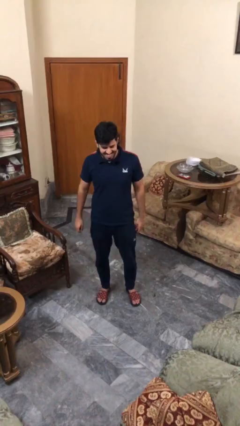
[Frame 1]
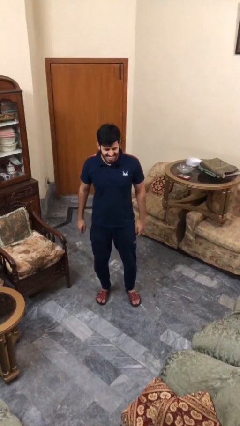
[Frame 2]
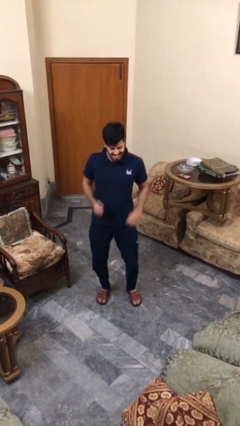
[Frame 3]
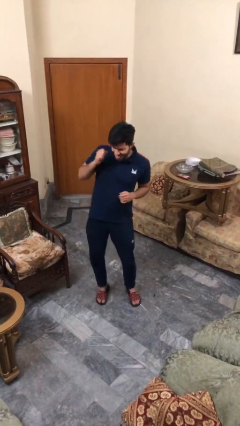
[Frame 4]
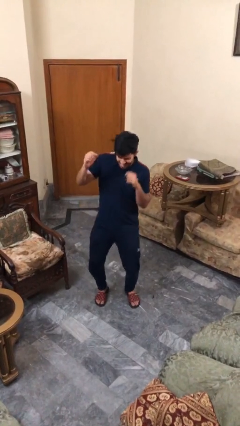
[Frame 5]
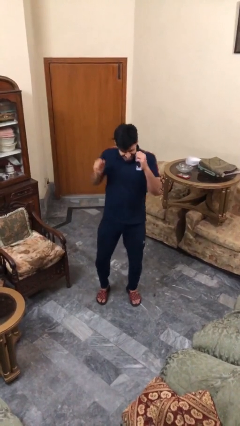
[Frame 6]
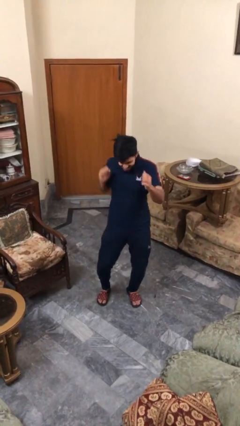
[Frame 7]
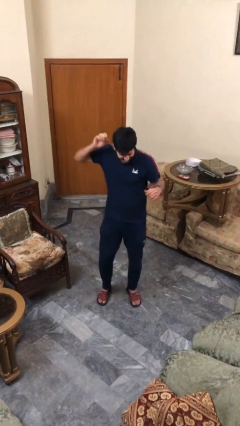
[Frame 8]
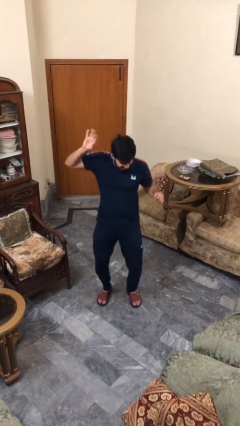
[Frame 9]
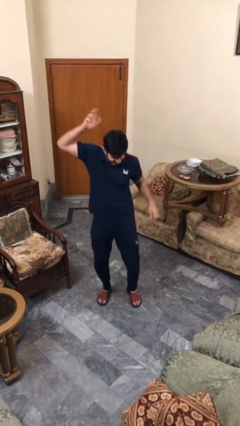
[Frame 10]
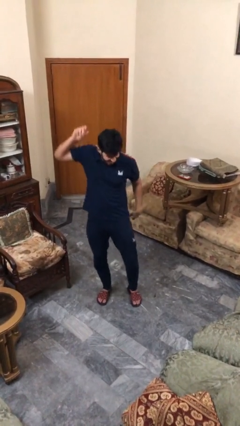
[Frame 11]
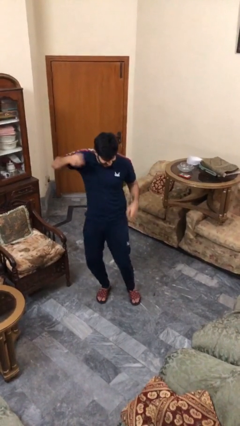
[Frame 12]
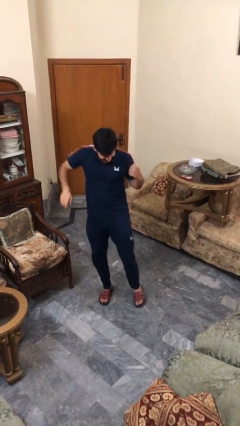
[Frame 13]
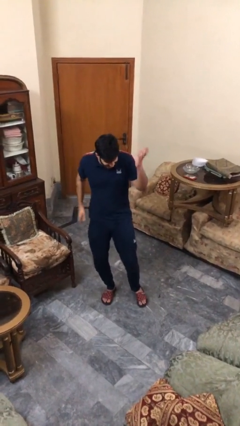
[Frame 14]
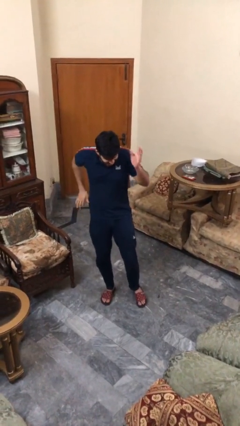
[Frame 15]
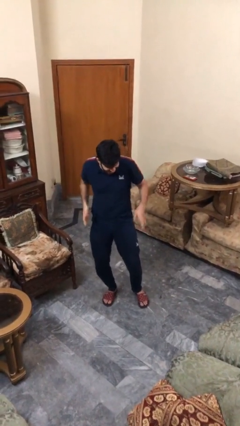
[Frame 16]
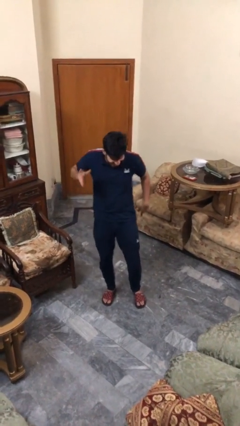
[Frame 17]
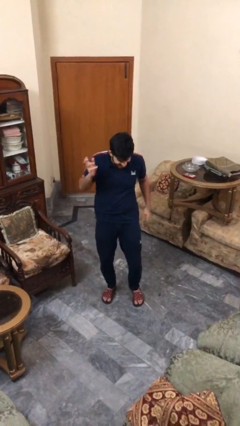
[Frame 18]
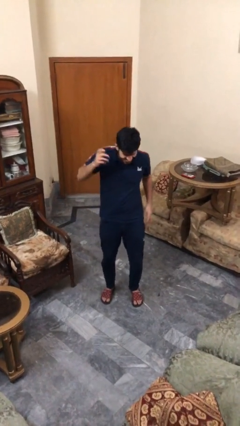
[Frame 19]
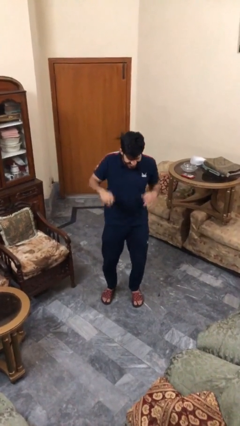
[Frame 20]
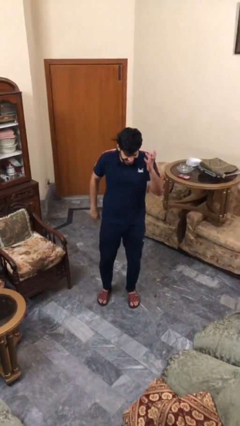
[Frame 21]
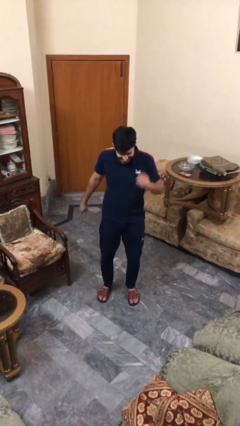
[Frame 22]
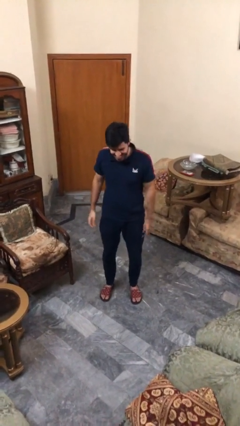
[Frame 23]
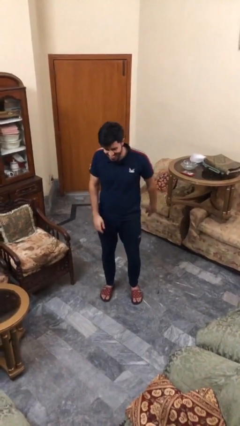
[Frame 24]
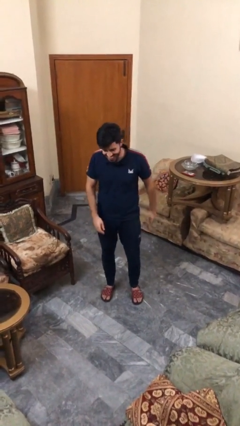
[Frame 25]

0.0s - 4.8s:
person dances in place

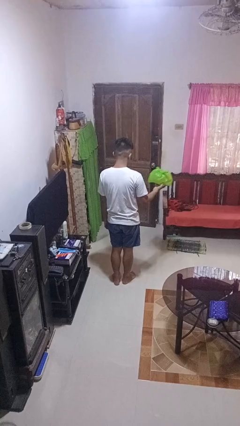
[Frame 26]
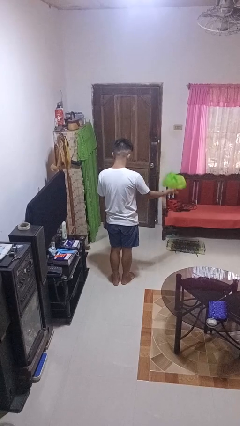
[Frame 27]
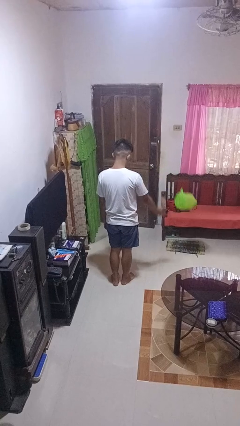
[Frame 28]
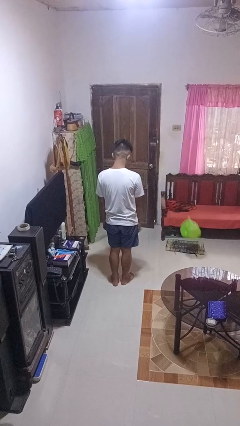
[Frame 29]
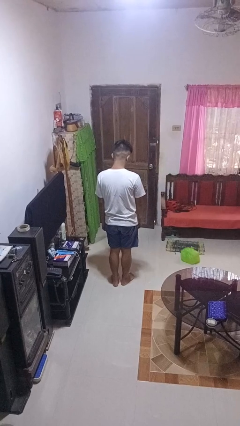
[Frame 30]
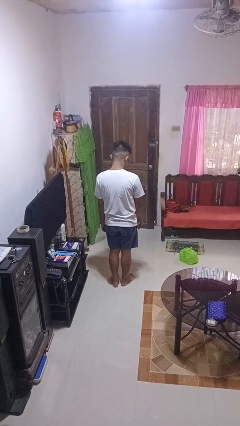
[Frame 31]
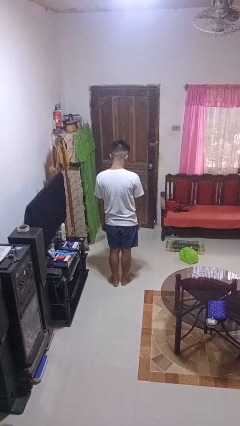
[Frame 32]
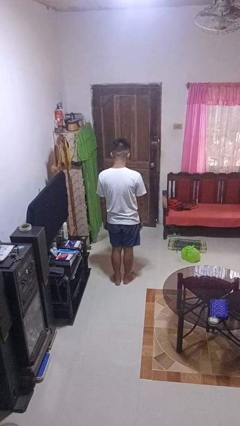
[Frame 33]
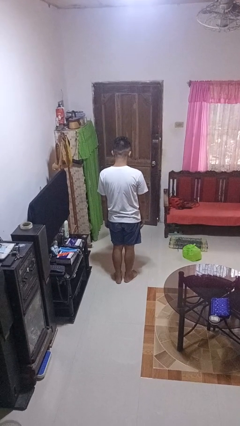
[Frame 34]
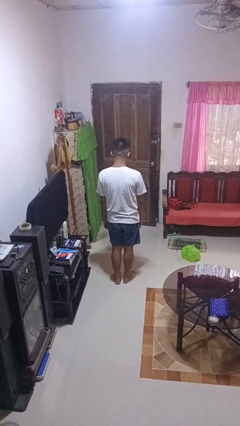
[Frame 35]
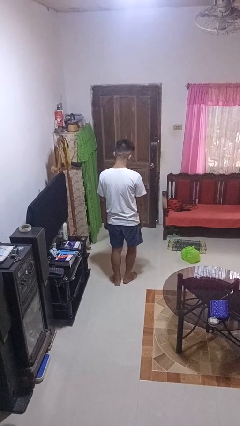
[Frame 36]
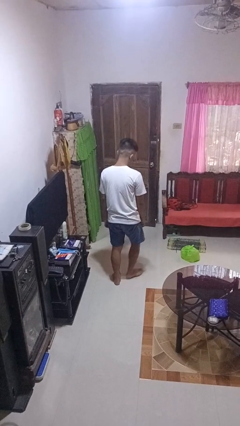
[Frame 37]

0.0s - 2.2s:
person throws object to ground

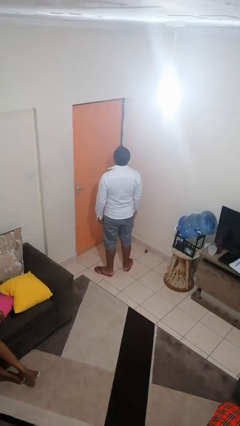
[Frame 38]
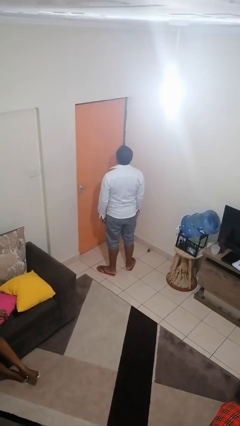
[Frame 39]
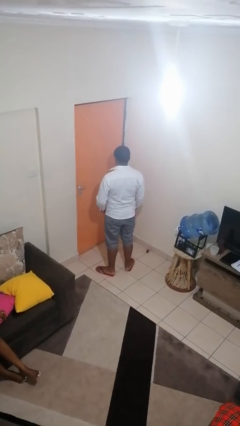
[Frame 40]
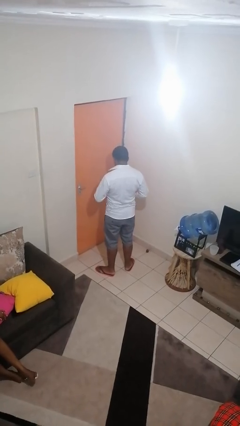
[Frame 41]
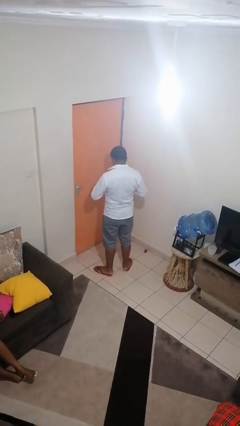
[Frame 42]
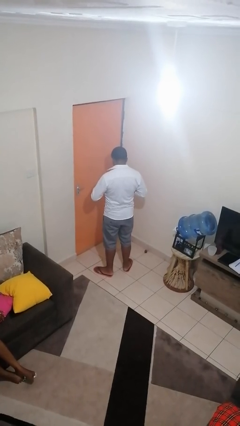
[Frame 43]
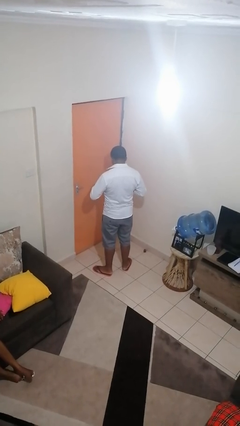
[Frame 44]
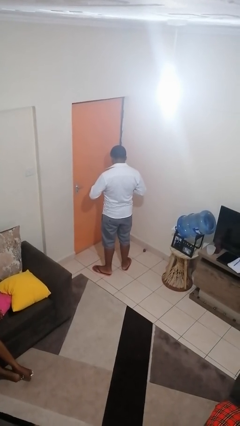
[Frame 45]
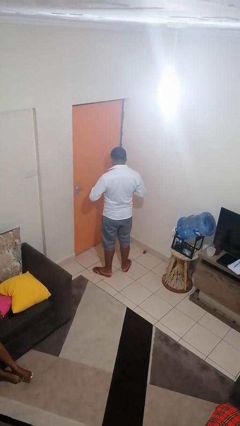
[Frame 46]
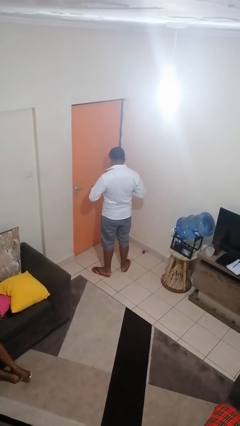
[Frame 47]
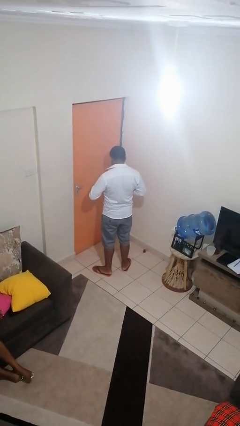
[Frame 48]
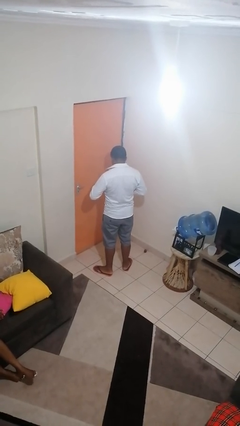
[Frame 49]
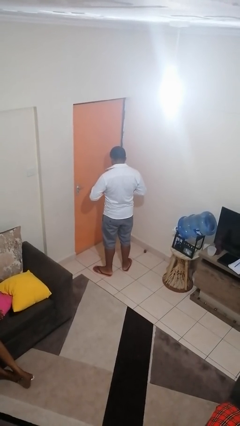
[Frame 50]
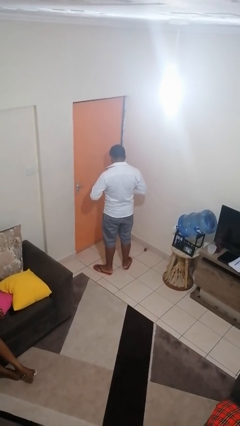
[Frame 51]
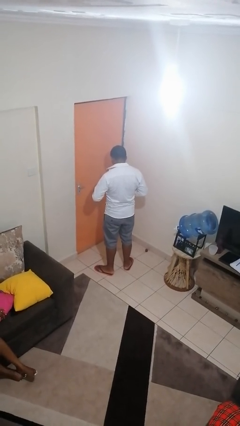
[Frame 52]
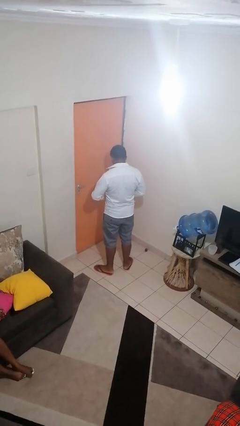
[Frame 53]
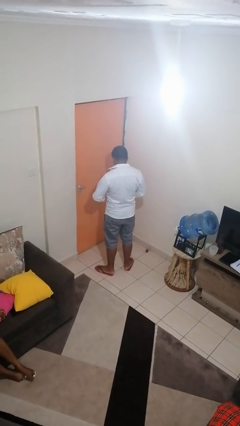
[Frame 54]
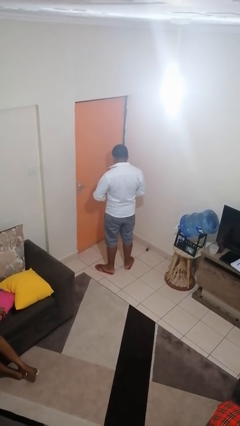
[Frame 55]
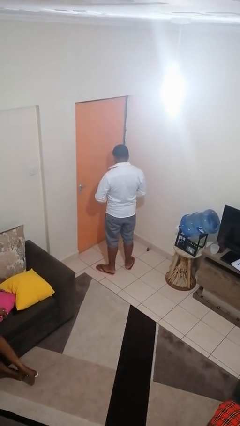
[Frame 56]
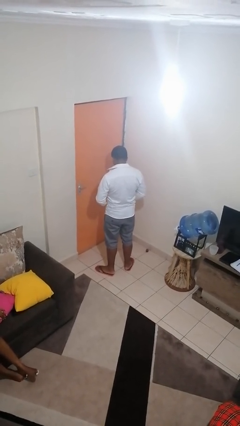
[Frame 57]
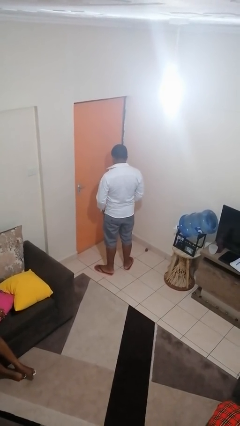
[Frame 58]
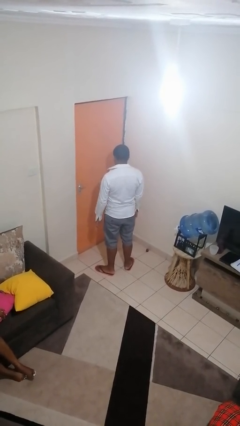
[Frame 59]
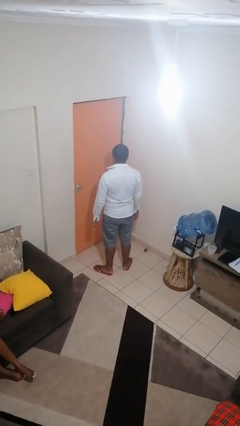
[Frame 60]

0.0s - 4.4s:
person unbuttons shirt

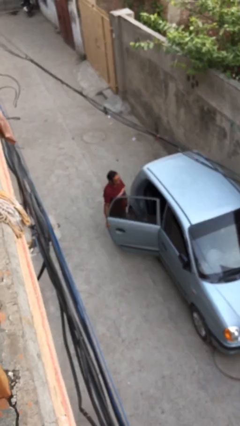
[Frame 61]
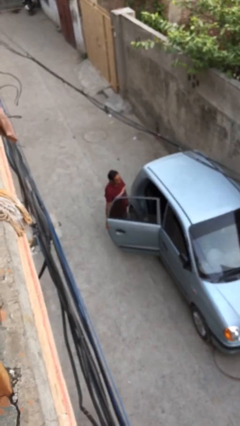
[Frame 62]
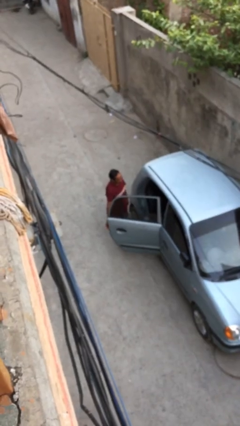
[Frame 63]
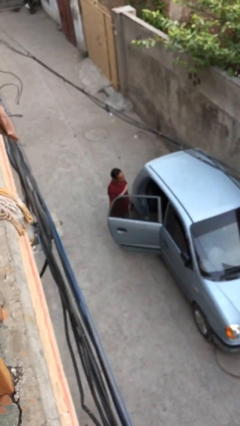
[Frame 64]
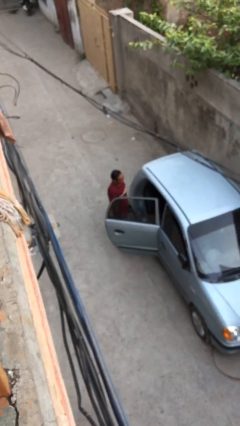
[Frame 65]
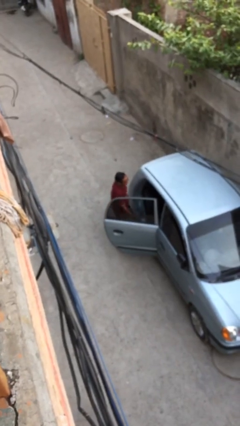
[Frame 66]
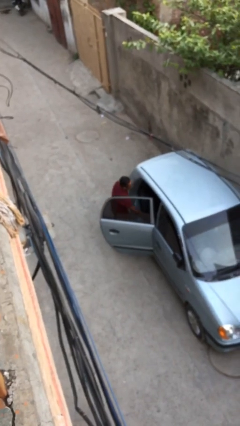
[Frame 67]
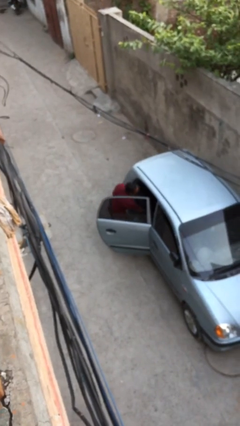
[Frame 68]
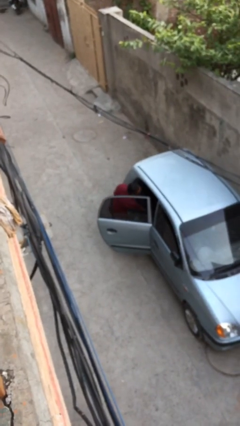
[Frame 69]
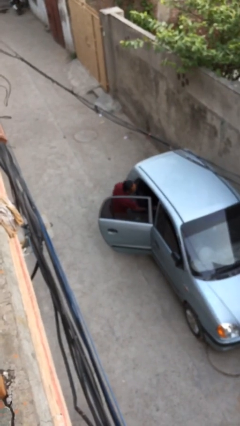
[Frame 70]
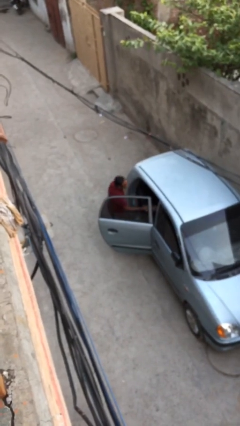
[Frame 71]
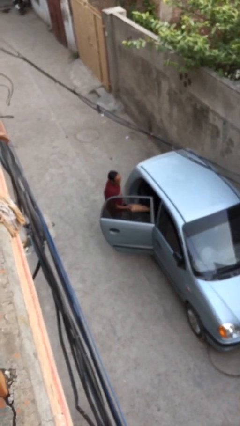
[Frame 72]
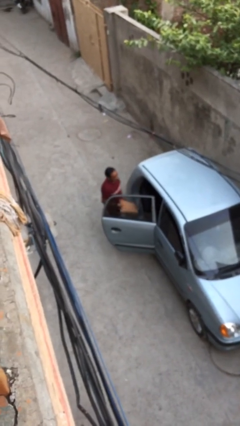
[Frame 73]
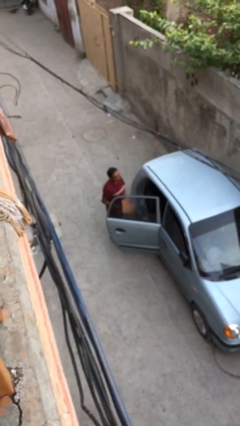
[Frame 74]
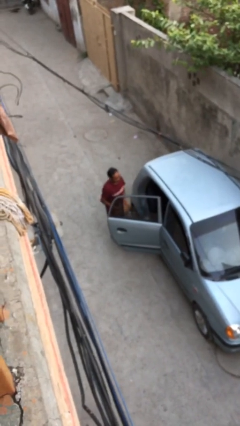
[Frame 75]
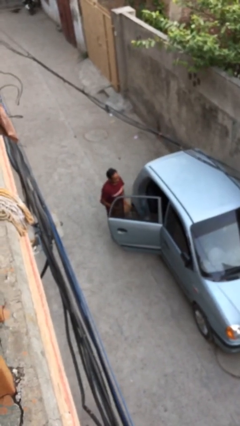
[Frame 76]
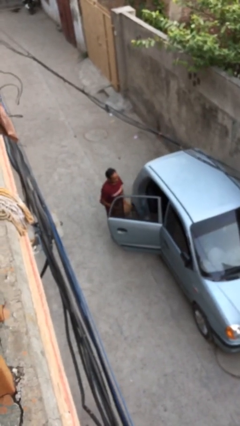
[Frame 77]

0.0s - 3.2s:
person unloads car

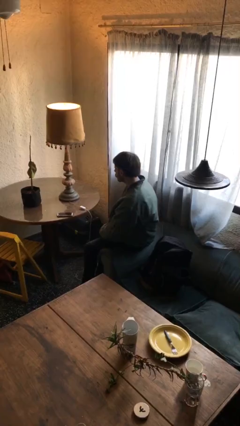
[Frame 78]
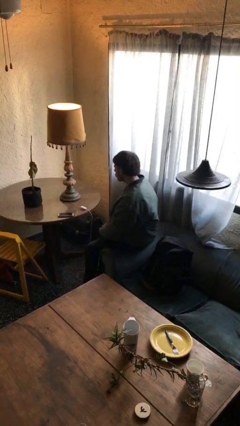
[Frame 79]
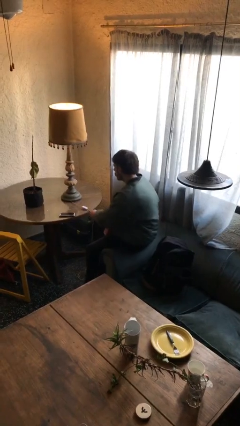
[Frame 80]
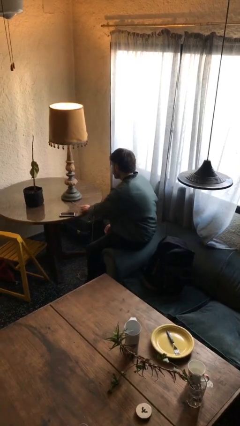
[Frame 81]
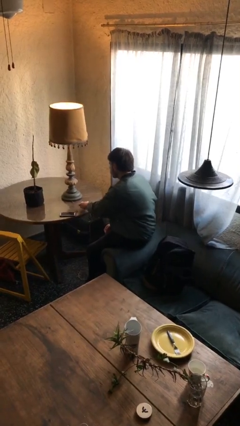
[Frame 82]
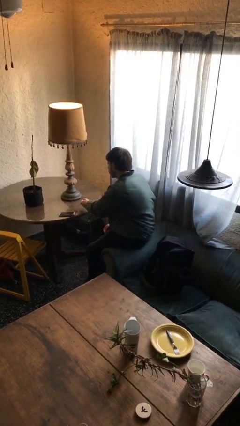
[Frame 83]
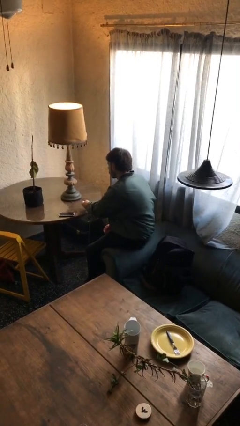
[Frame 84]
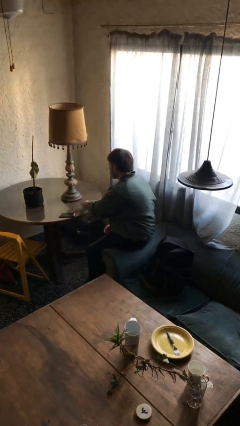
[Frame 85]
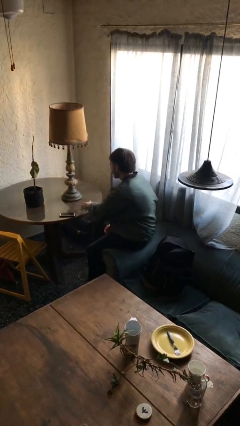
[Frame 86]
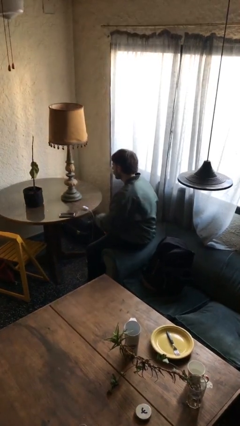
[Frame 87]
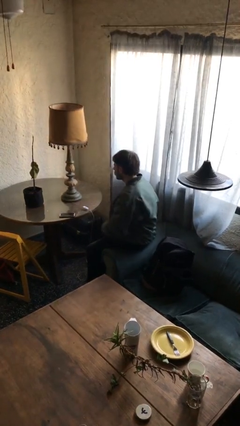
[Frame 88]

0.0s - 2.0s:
person turns off lamp

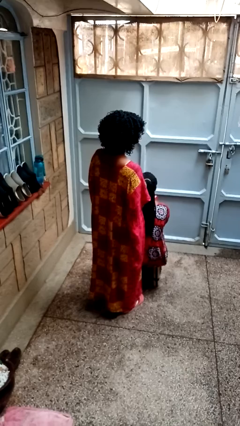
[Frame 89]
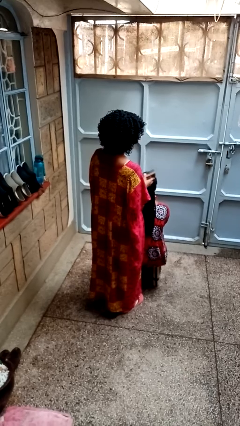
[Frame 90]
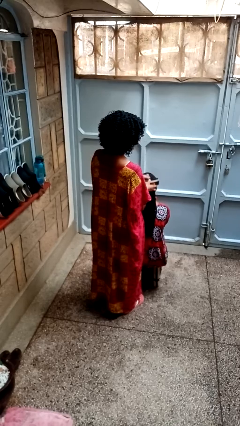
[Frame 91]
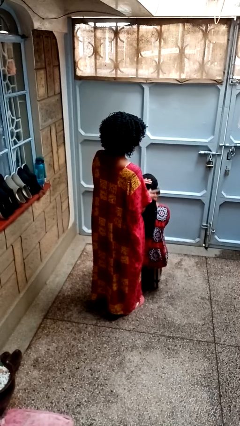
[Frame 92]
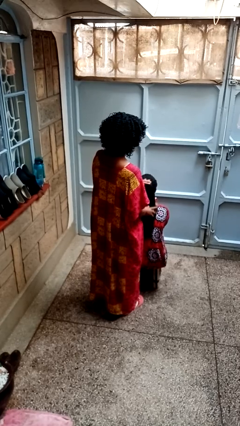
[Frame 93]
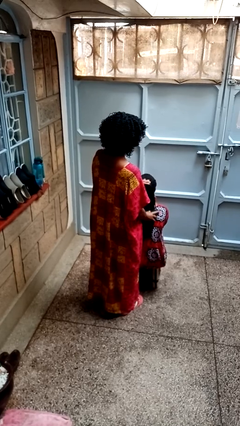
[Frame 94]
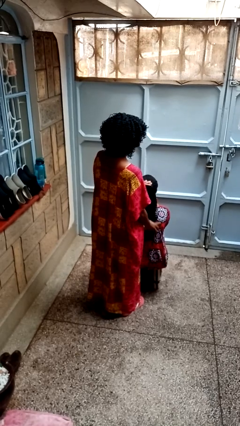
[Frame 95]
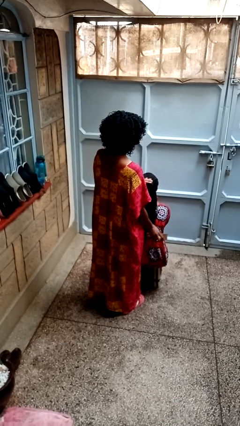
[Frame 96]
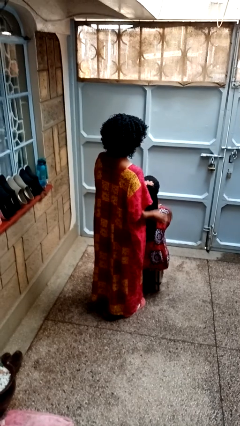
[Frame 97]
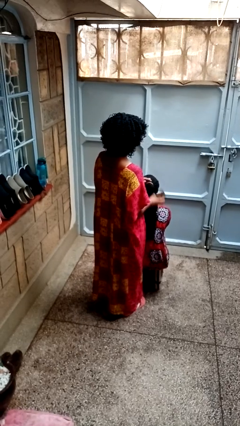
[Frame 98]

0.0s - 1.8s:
person brushes hair of person
